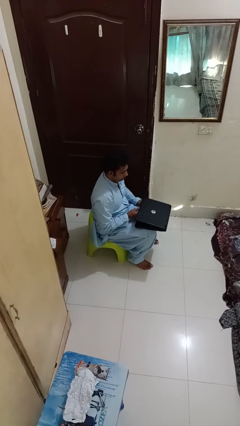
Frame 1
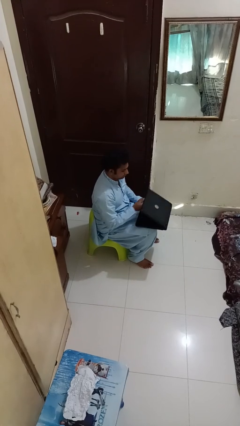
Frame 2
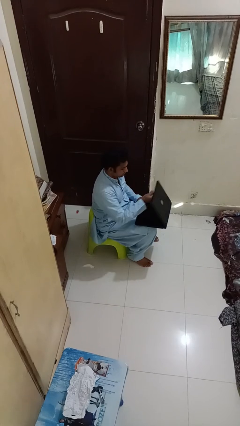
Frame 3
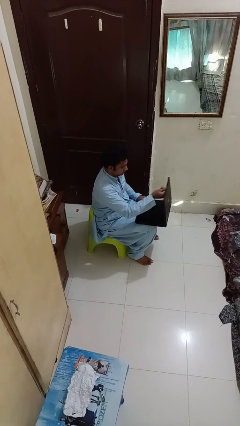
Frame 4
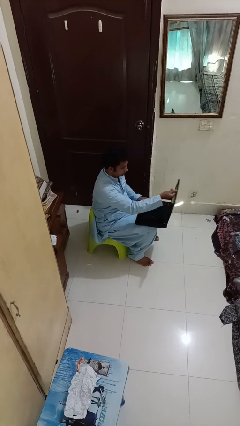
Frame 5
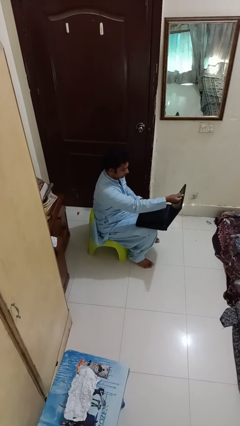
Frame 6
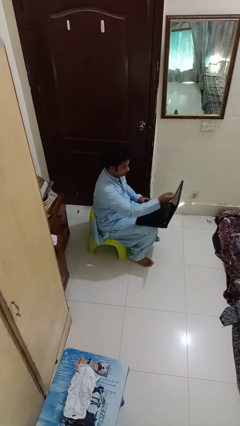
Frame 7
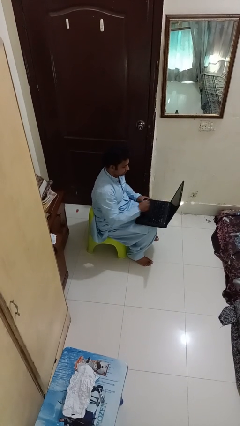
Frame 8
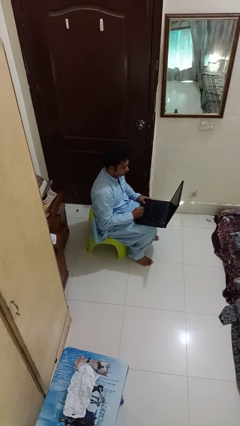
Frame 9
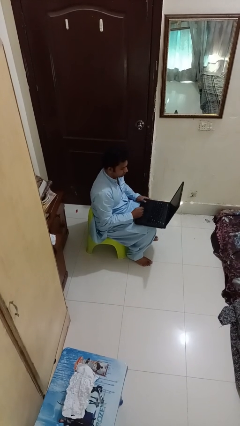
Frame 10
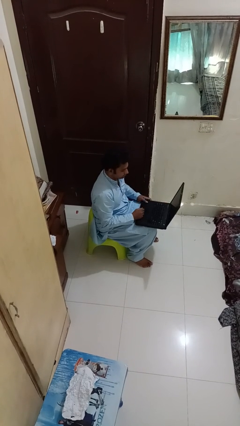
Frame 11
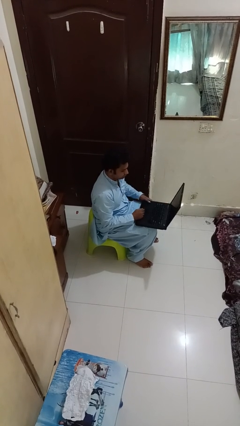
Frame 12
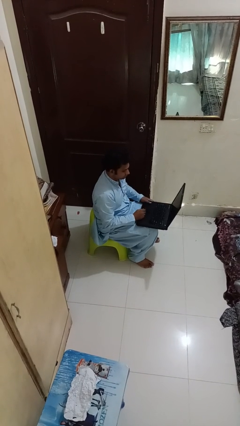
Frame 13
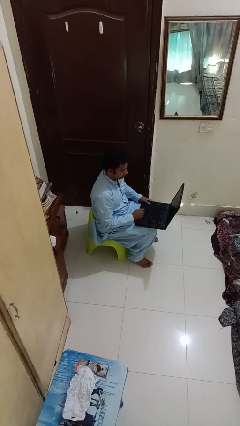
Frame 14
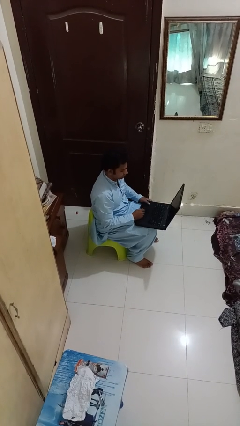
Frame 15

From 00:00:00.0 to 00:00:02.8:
person opens laptop

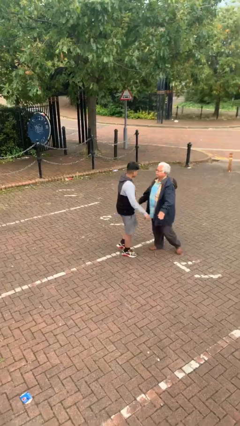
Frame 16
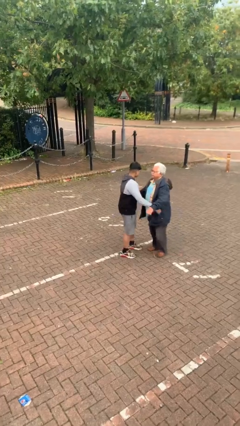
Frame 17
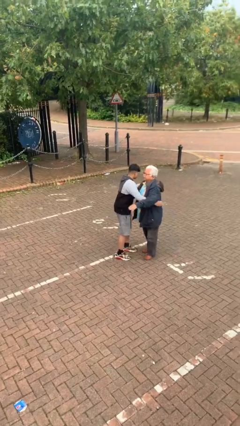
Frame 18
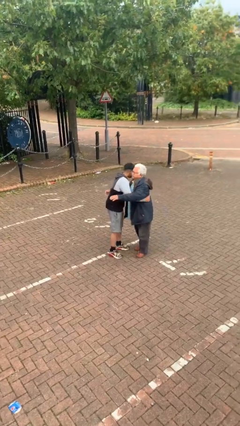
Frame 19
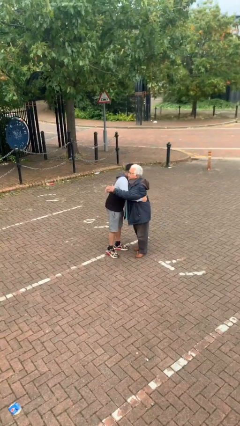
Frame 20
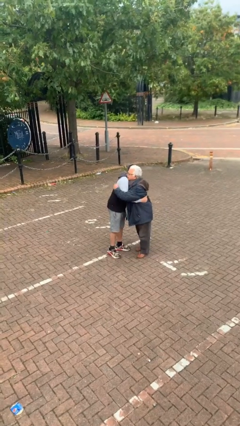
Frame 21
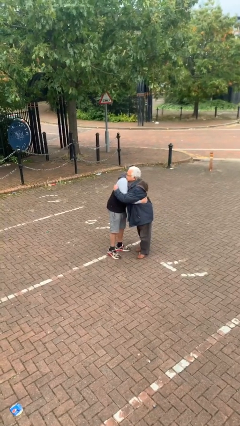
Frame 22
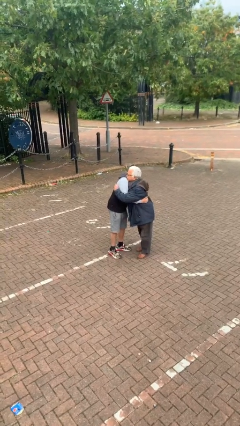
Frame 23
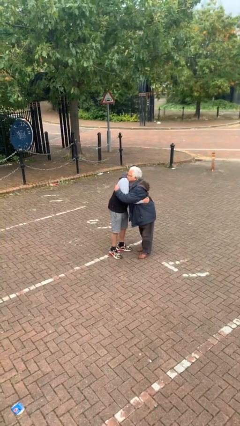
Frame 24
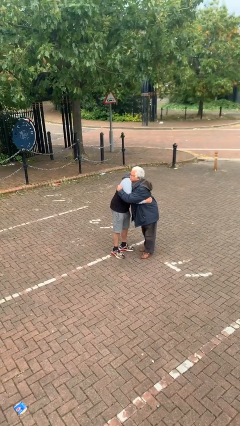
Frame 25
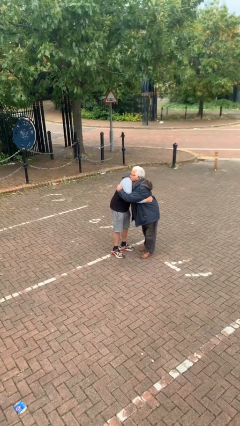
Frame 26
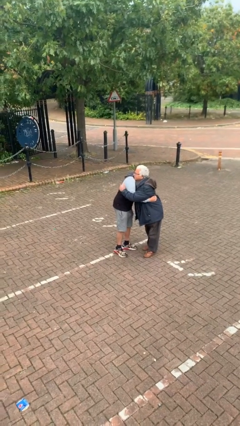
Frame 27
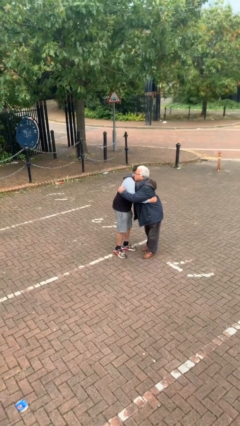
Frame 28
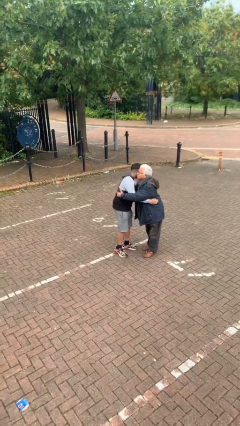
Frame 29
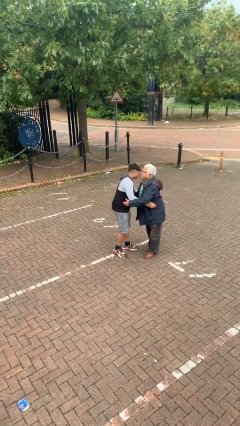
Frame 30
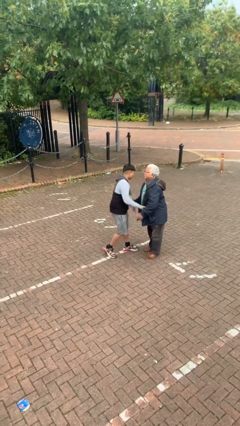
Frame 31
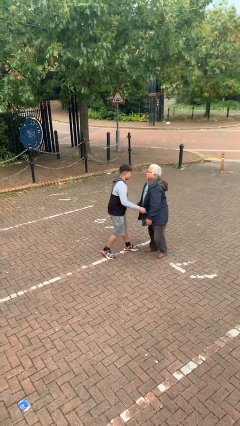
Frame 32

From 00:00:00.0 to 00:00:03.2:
person embraces person

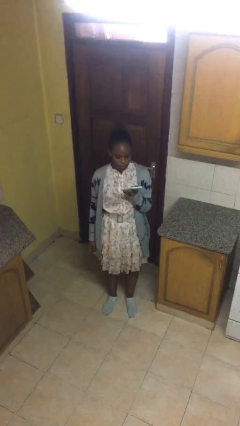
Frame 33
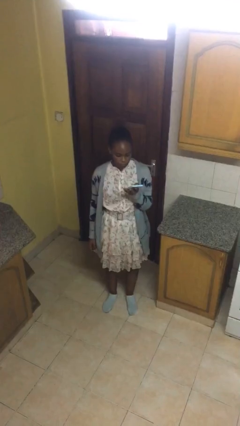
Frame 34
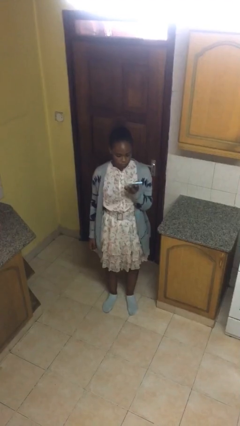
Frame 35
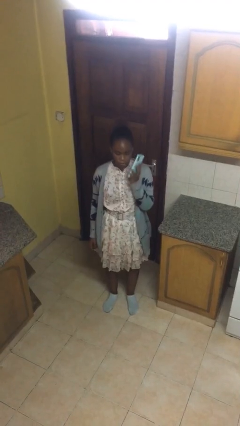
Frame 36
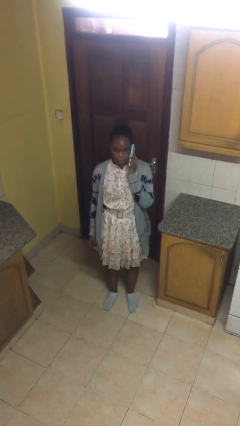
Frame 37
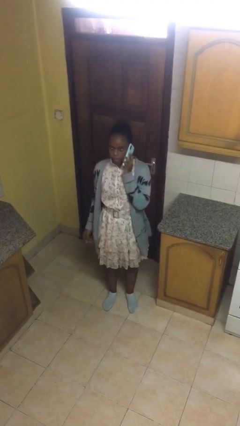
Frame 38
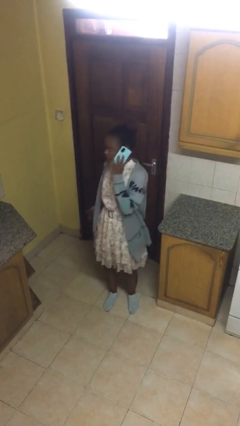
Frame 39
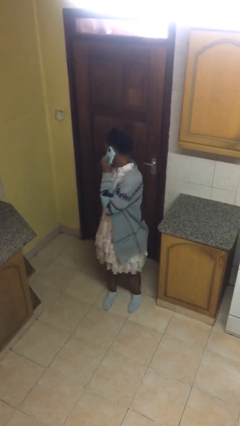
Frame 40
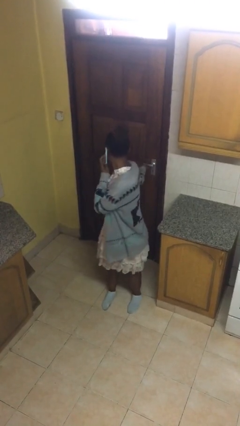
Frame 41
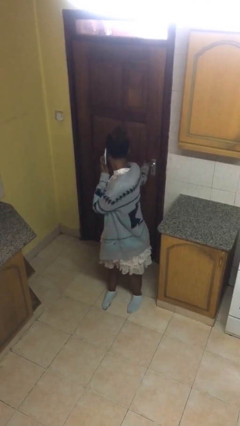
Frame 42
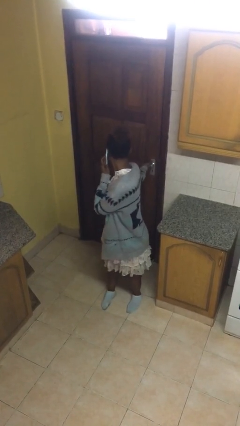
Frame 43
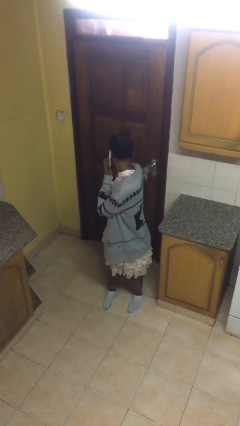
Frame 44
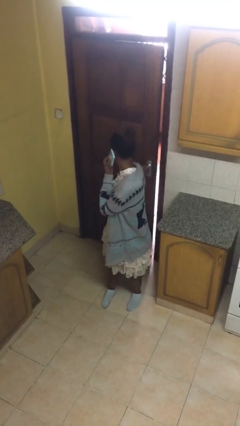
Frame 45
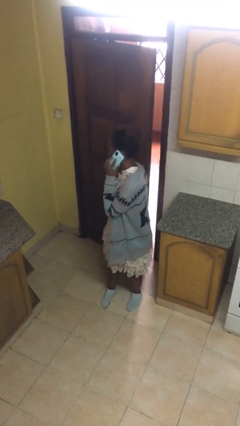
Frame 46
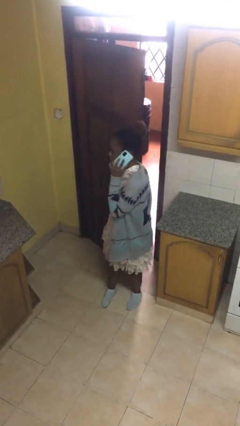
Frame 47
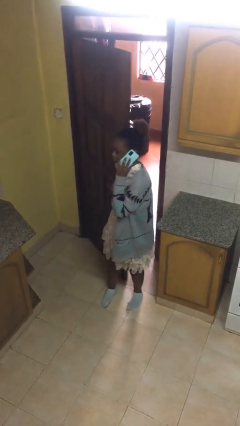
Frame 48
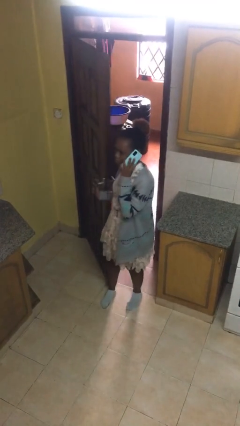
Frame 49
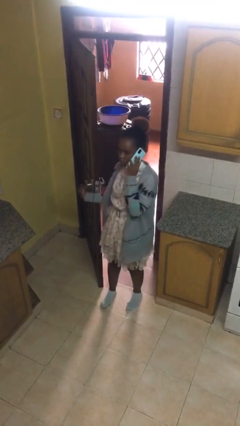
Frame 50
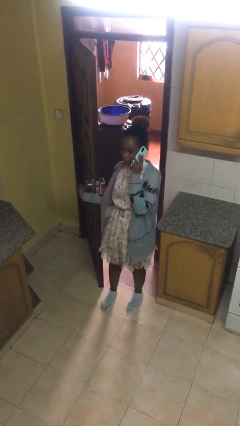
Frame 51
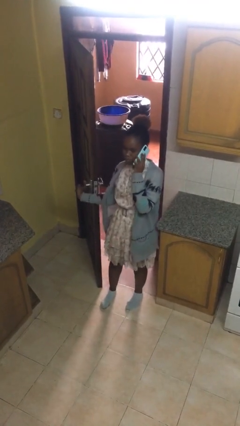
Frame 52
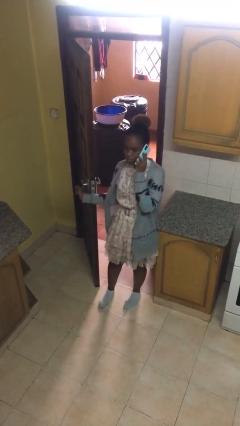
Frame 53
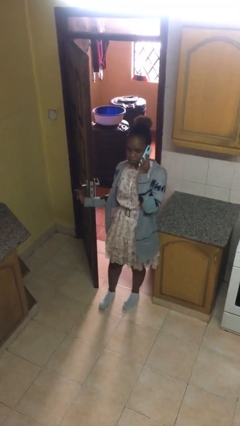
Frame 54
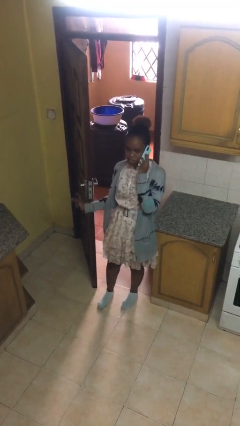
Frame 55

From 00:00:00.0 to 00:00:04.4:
person opens facility door

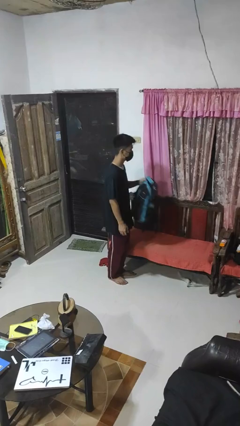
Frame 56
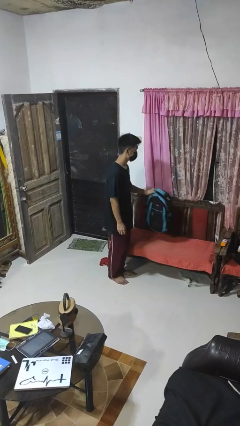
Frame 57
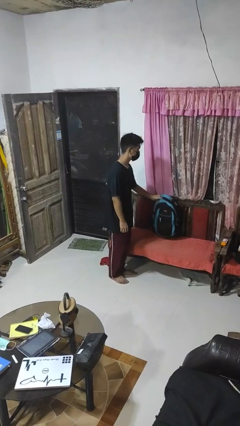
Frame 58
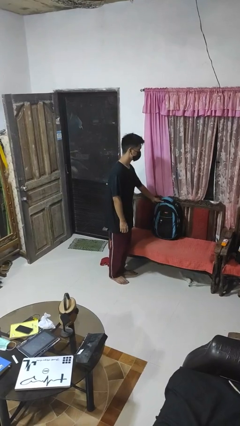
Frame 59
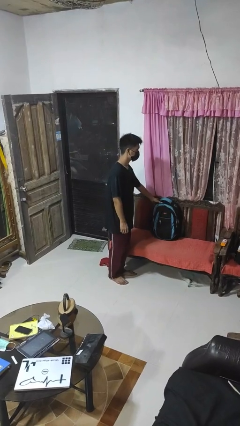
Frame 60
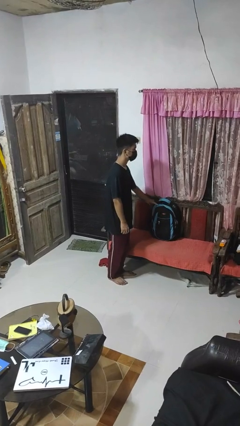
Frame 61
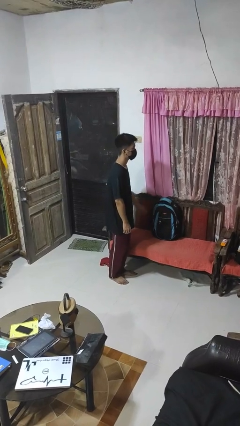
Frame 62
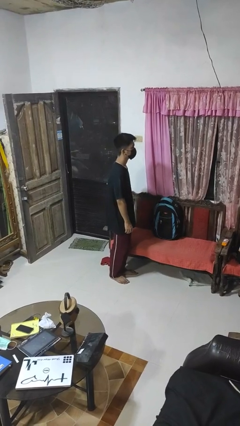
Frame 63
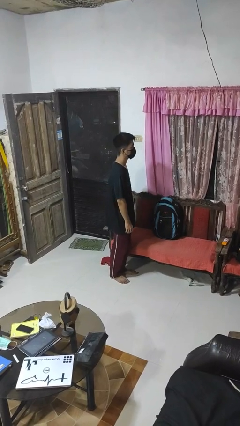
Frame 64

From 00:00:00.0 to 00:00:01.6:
person puts down object on couch

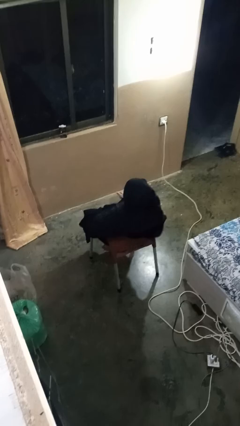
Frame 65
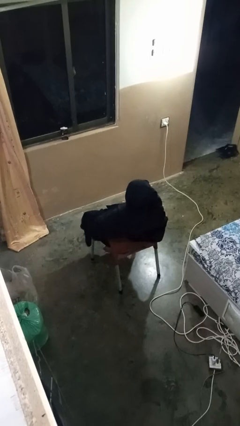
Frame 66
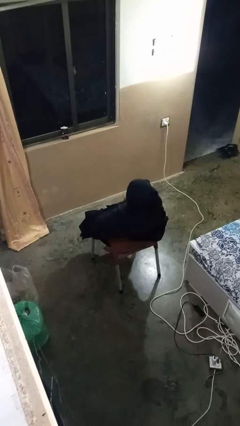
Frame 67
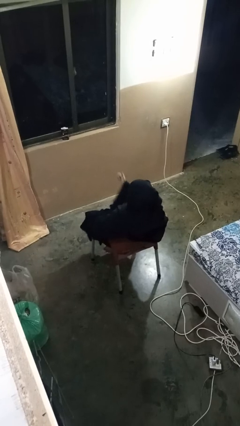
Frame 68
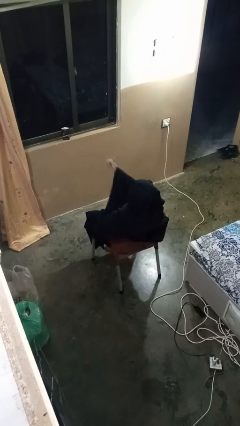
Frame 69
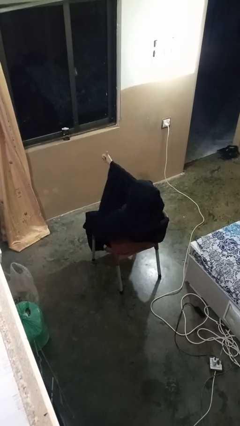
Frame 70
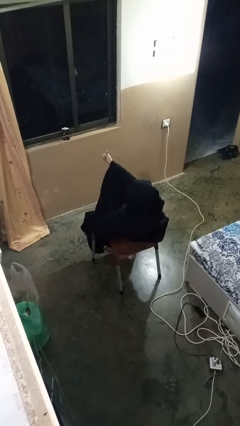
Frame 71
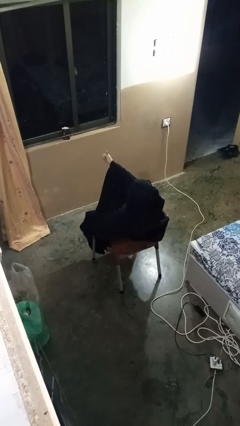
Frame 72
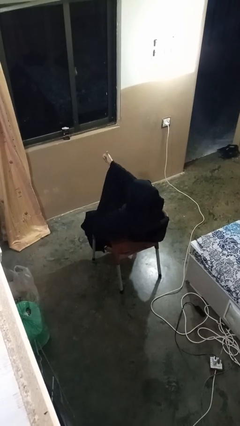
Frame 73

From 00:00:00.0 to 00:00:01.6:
person gestures thumbs up

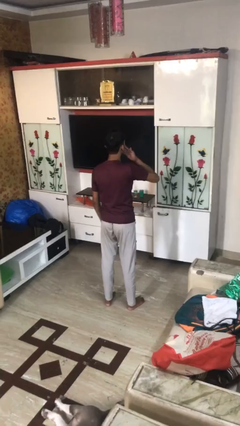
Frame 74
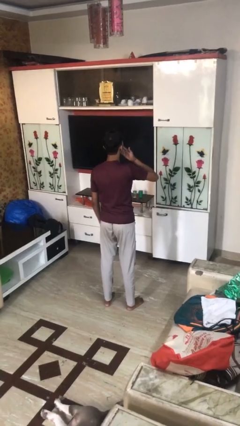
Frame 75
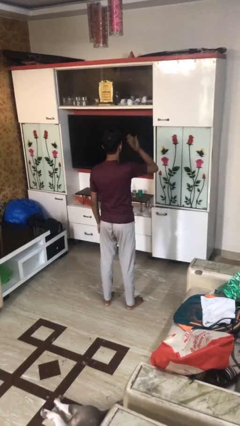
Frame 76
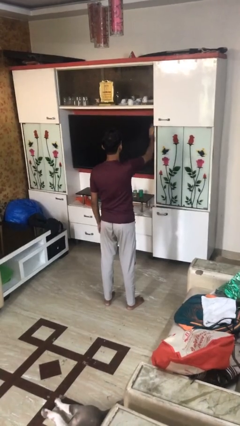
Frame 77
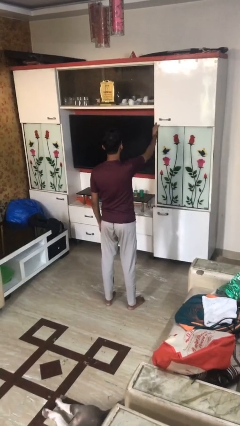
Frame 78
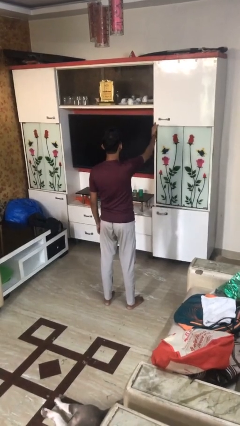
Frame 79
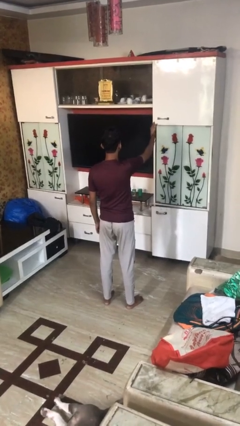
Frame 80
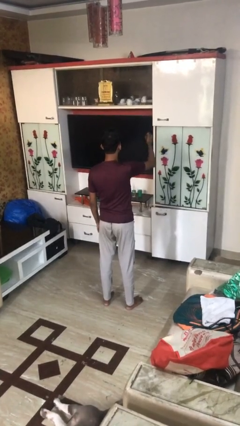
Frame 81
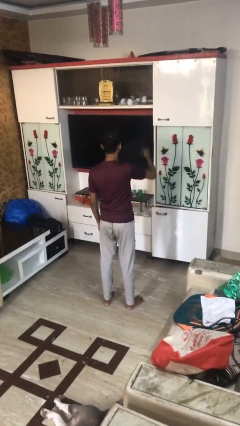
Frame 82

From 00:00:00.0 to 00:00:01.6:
person gestures blow kiss

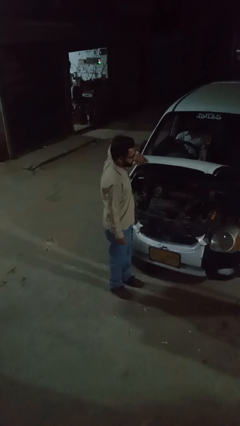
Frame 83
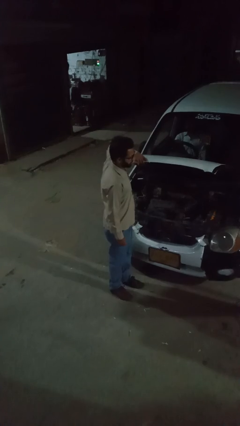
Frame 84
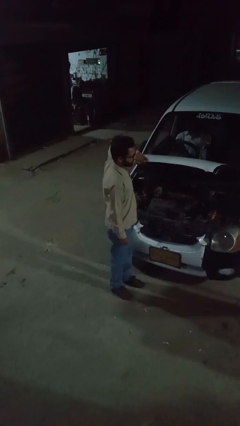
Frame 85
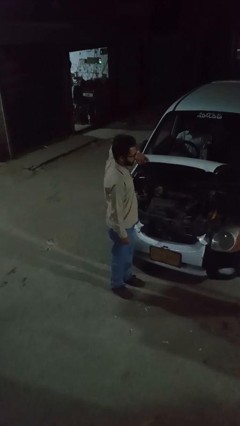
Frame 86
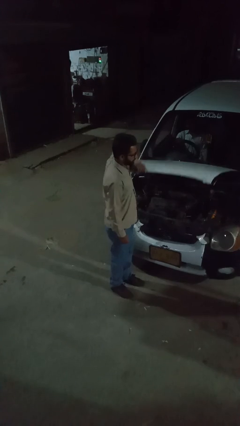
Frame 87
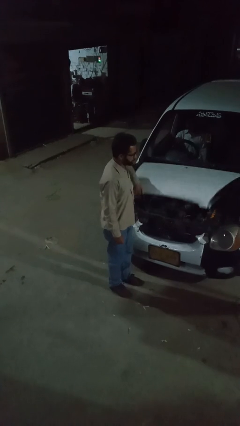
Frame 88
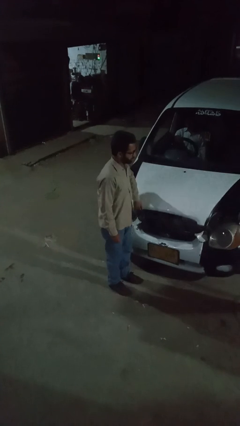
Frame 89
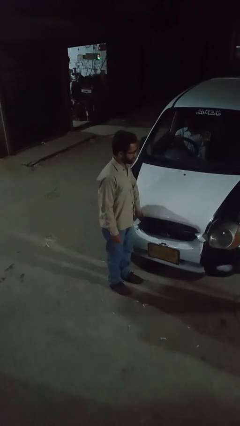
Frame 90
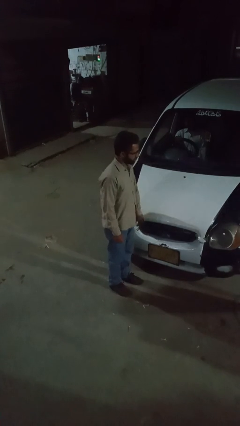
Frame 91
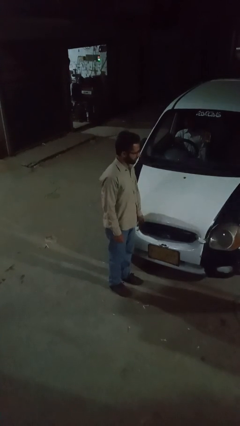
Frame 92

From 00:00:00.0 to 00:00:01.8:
person closes car hood
